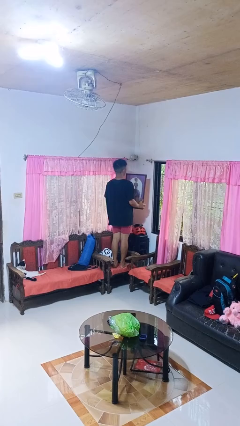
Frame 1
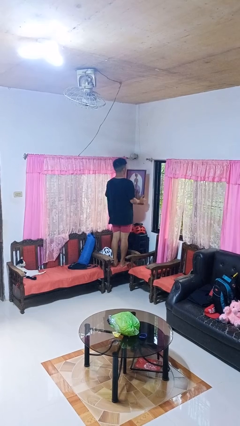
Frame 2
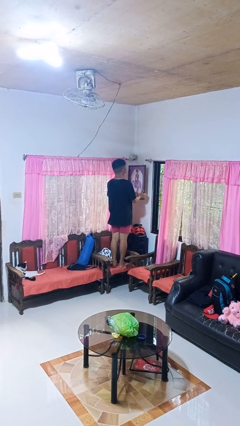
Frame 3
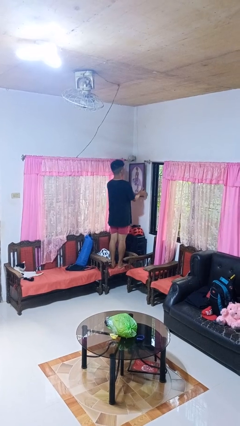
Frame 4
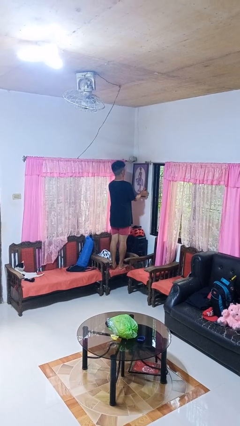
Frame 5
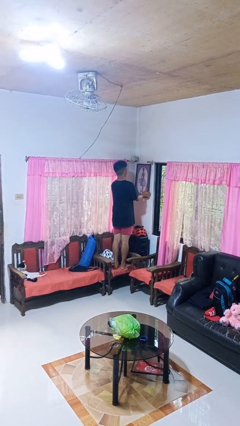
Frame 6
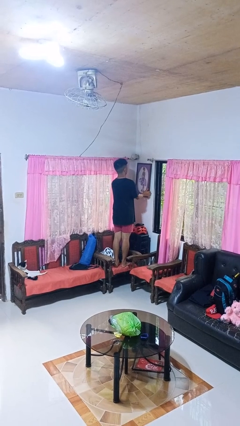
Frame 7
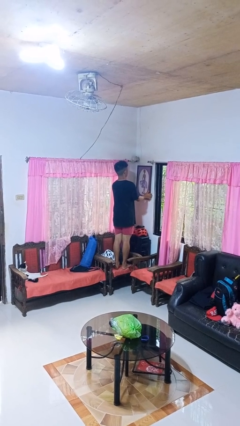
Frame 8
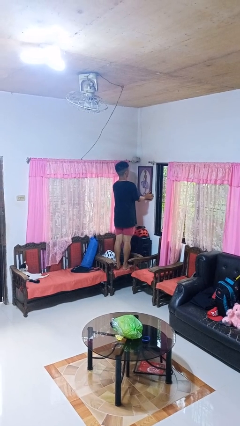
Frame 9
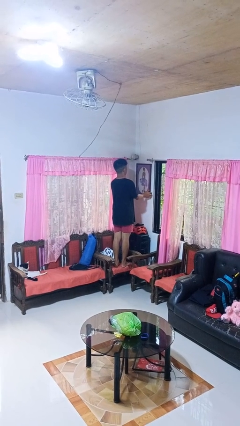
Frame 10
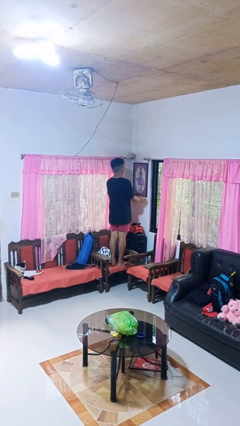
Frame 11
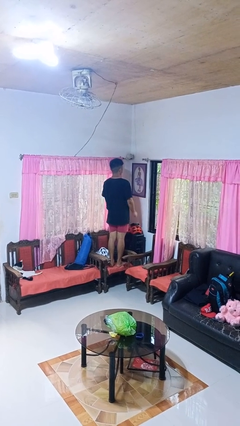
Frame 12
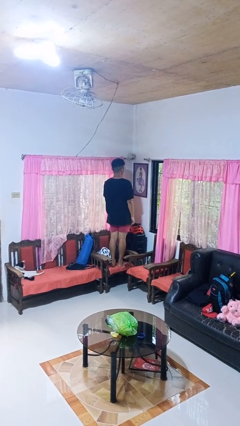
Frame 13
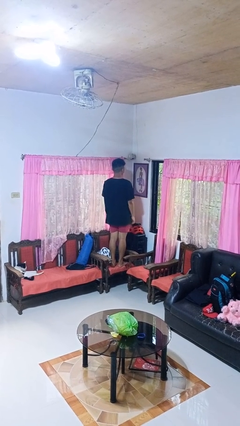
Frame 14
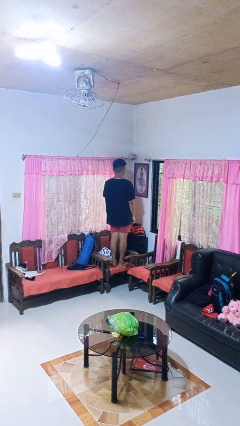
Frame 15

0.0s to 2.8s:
person puts up picture frame

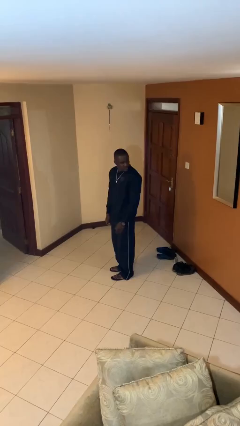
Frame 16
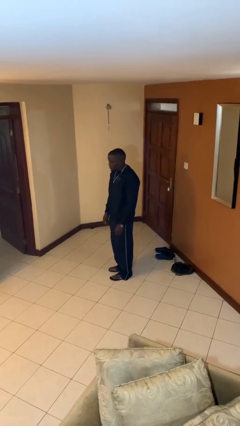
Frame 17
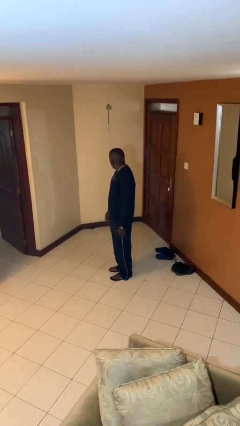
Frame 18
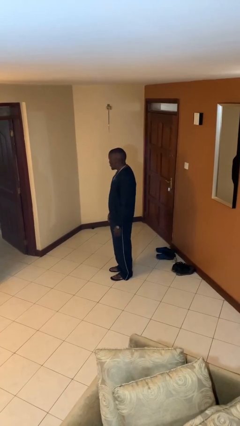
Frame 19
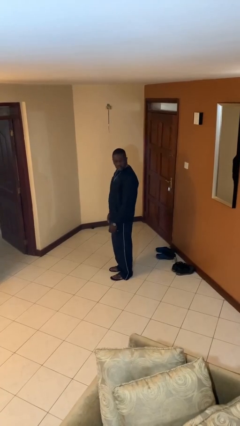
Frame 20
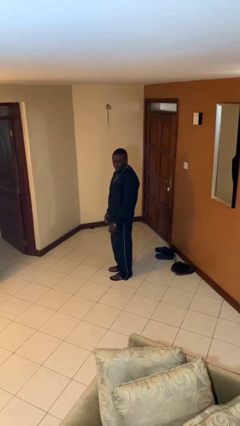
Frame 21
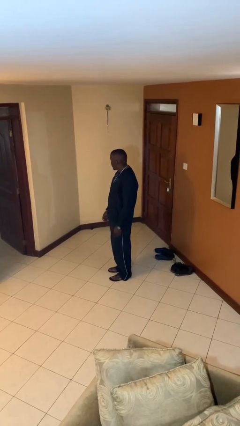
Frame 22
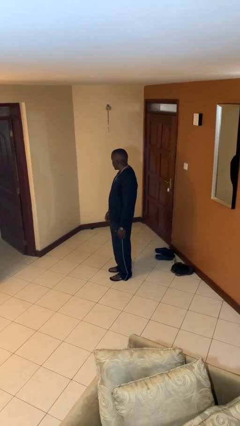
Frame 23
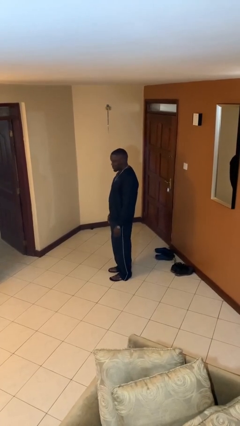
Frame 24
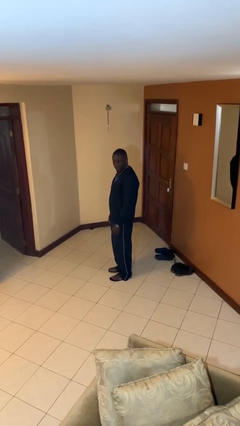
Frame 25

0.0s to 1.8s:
person shakes head

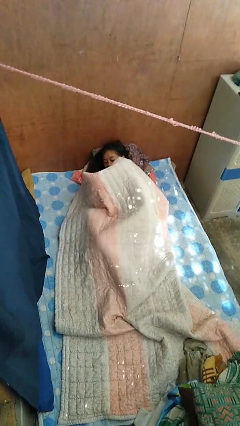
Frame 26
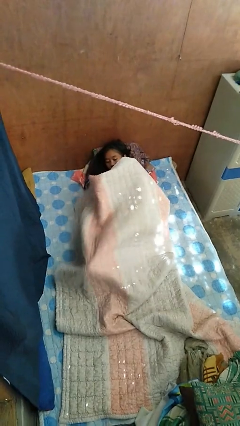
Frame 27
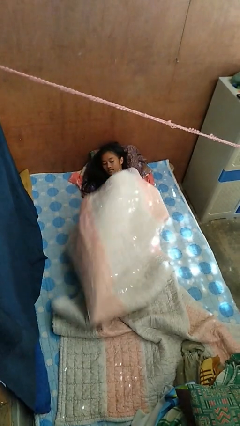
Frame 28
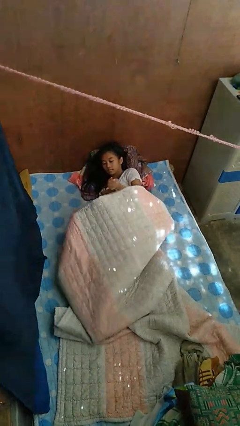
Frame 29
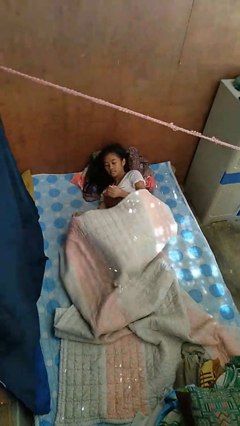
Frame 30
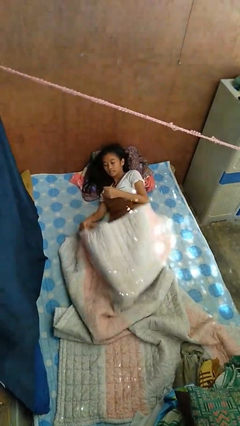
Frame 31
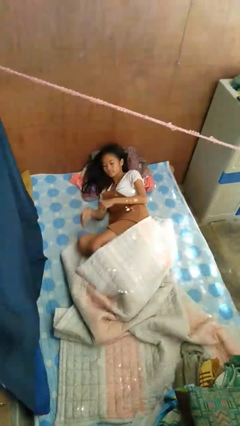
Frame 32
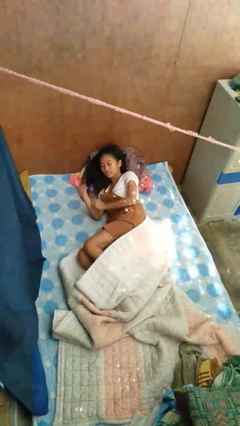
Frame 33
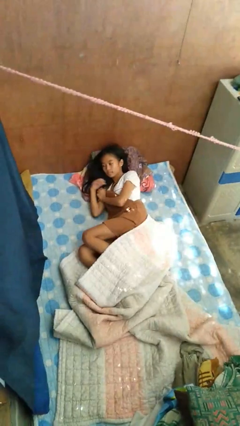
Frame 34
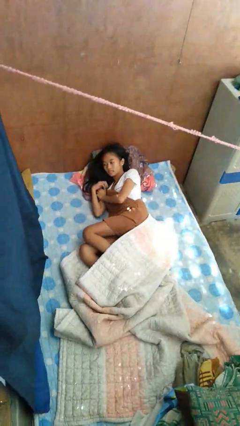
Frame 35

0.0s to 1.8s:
person uncovers with bedsheets

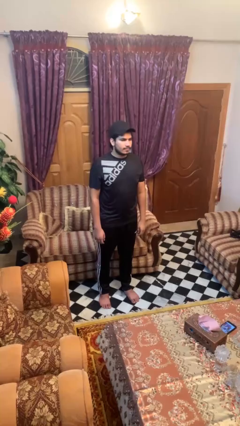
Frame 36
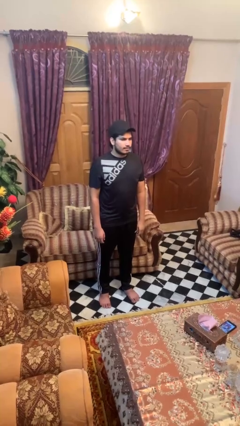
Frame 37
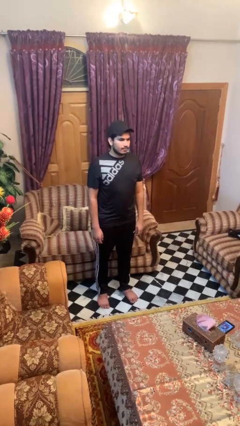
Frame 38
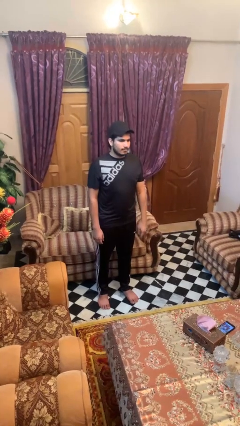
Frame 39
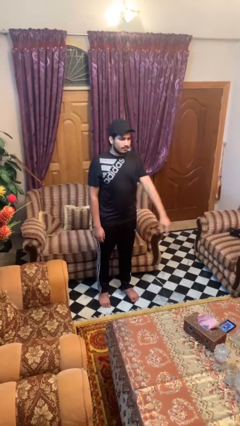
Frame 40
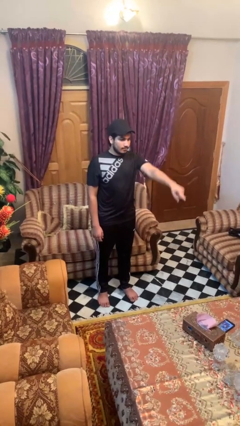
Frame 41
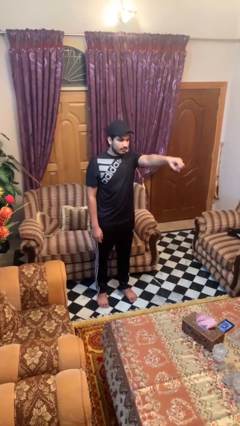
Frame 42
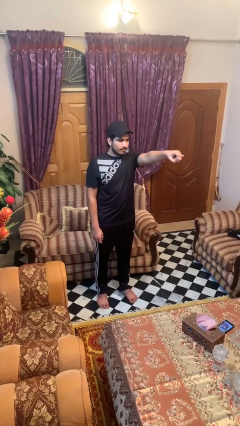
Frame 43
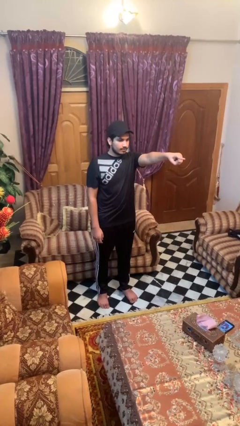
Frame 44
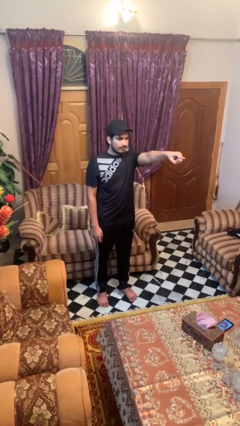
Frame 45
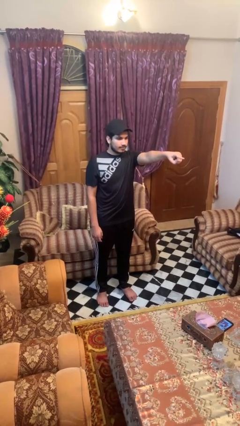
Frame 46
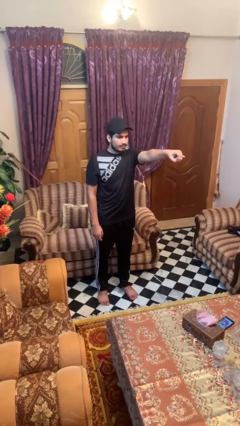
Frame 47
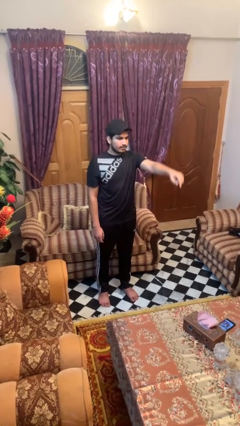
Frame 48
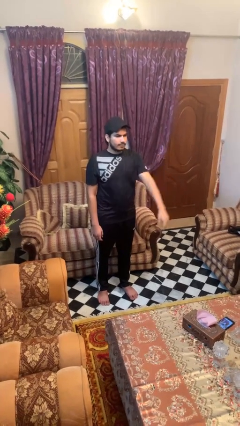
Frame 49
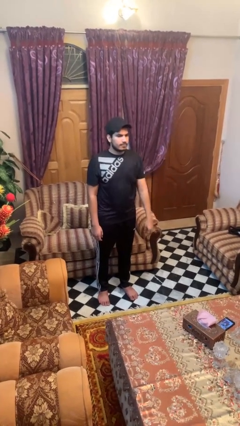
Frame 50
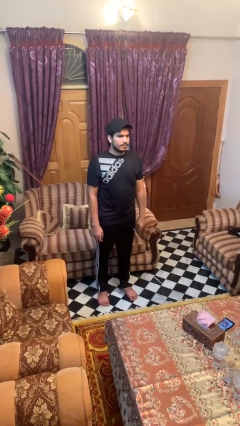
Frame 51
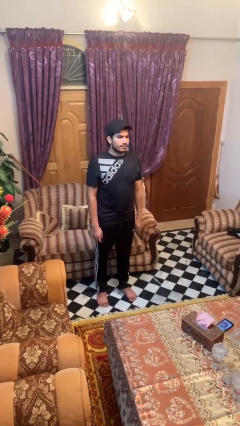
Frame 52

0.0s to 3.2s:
person points at person

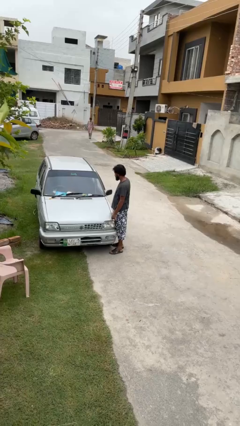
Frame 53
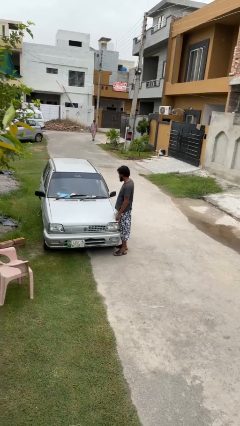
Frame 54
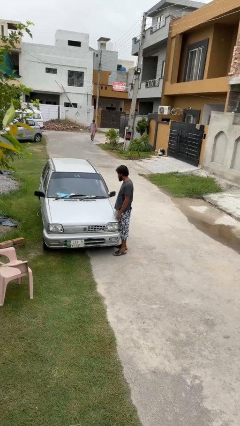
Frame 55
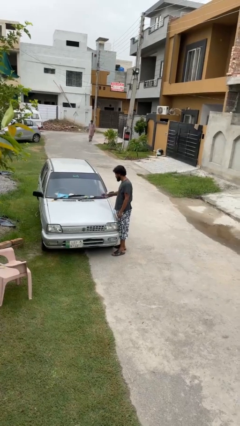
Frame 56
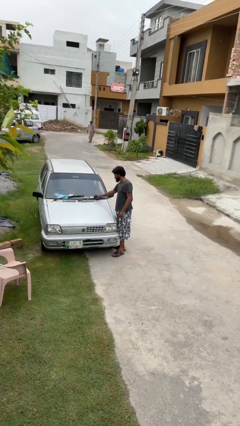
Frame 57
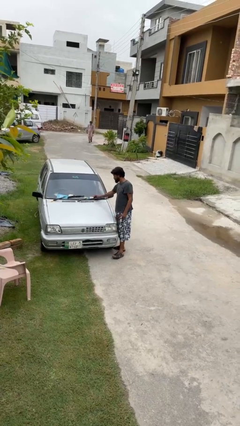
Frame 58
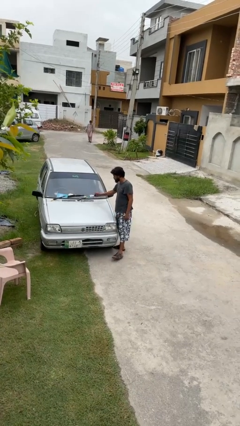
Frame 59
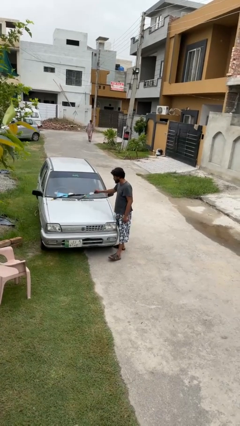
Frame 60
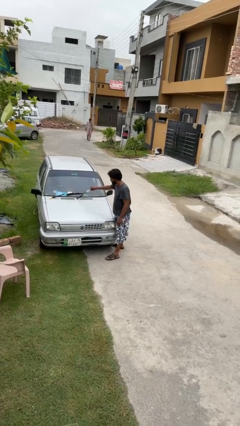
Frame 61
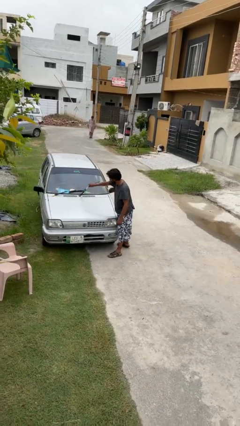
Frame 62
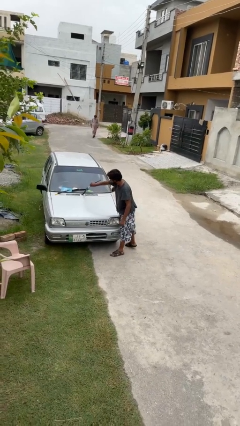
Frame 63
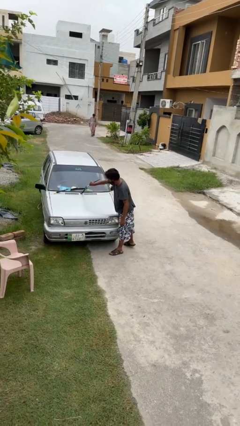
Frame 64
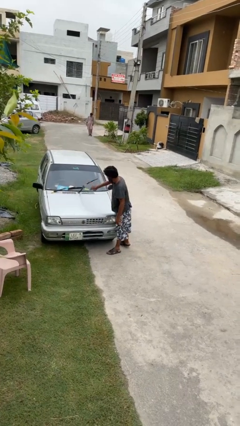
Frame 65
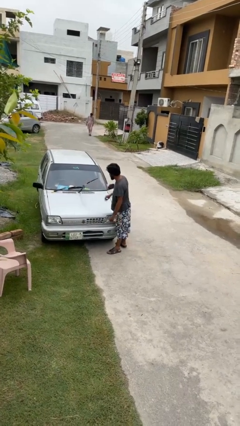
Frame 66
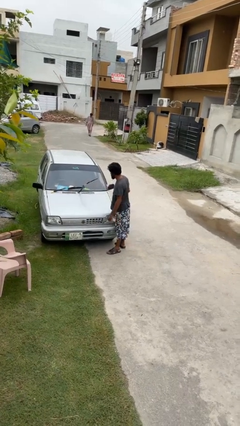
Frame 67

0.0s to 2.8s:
person flips up car wipers

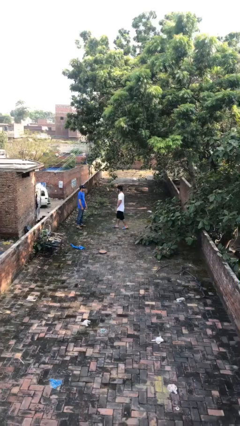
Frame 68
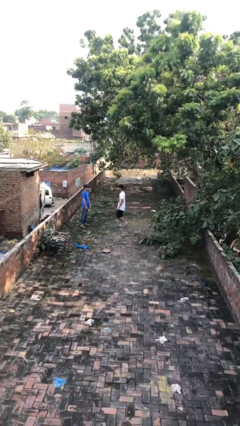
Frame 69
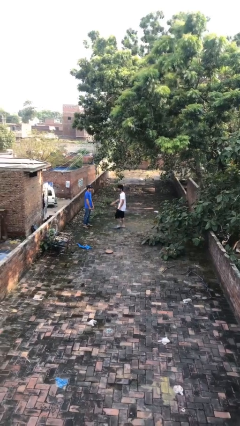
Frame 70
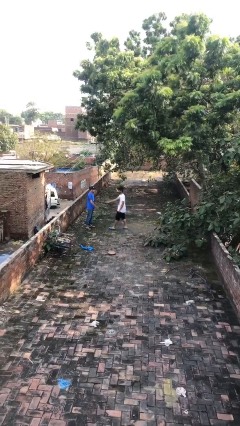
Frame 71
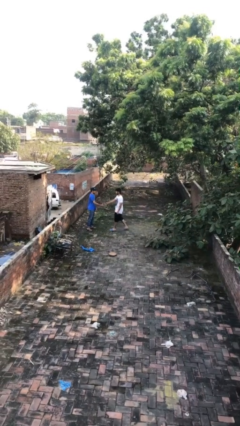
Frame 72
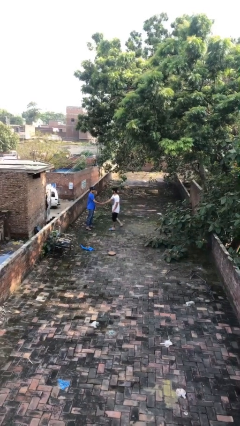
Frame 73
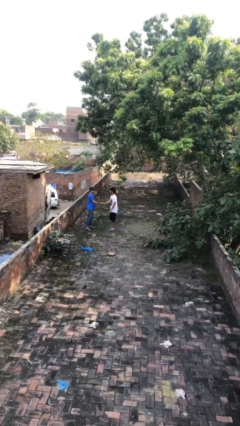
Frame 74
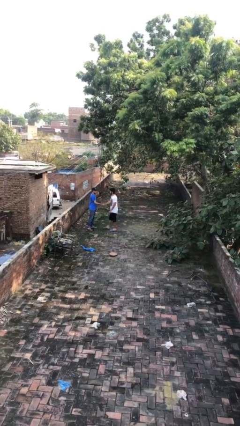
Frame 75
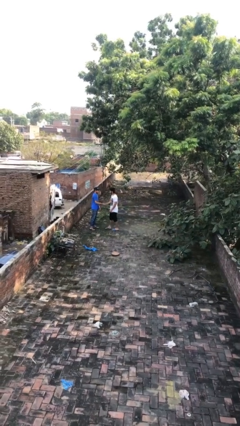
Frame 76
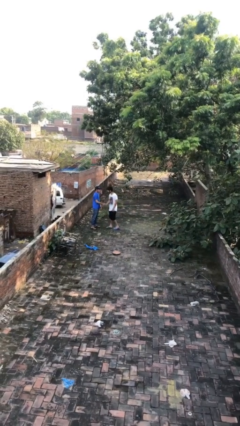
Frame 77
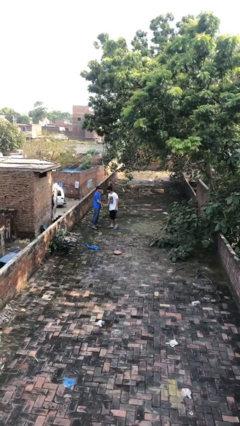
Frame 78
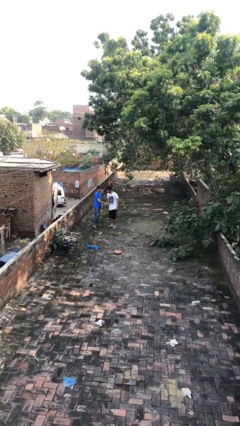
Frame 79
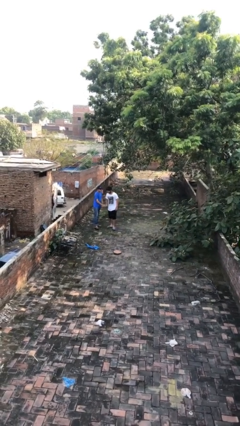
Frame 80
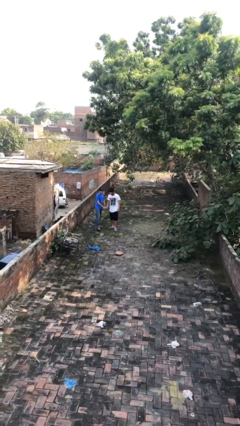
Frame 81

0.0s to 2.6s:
person shakes hand

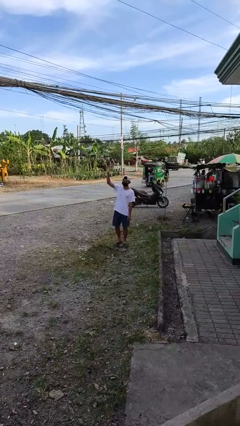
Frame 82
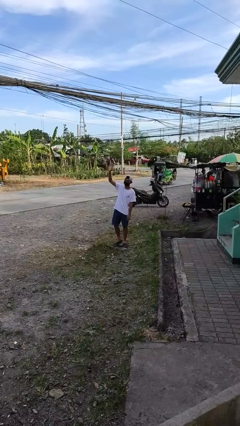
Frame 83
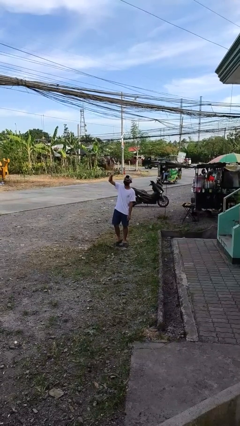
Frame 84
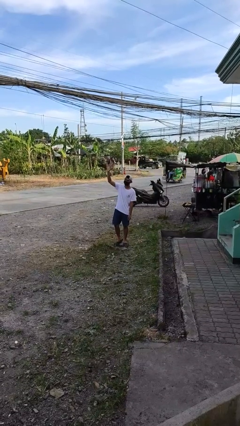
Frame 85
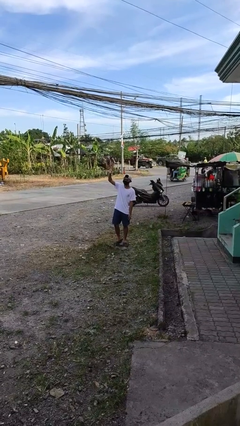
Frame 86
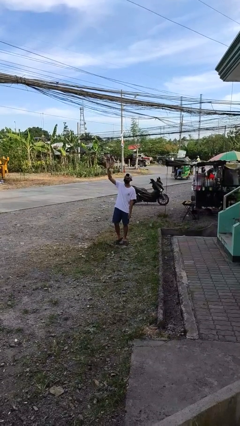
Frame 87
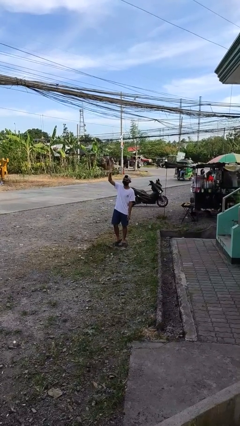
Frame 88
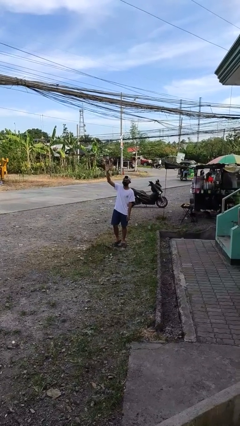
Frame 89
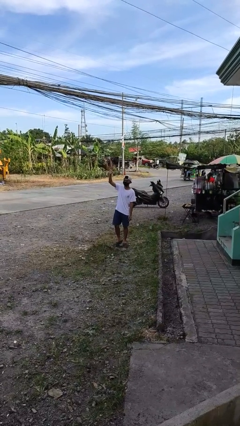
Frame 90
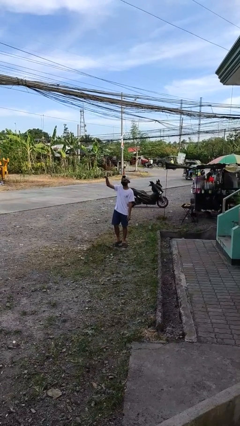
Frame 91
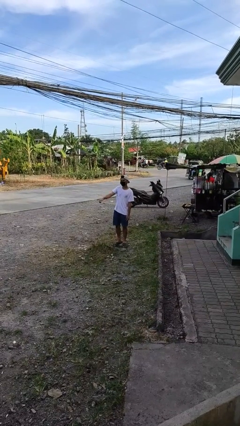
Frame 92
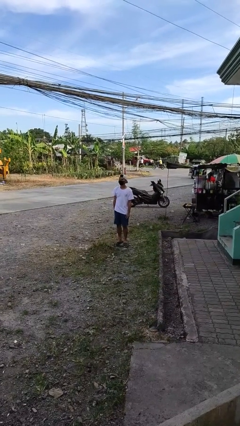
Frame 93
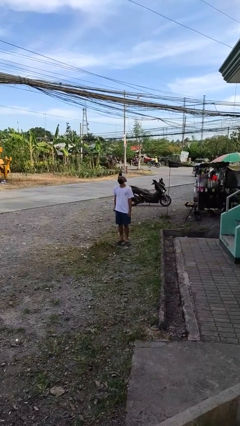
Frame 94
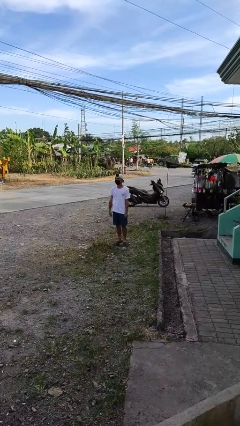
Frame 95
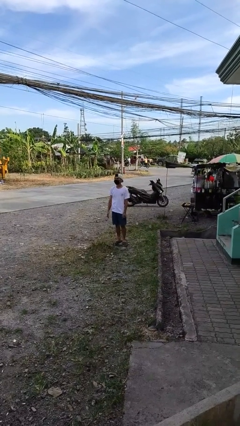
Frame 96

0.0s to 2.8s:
person waves at person
